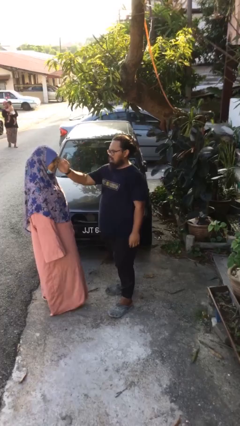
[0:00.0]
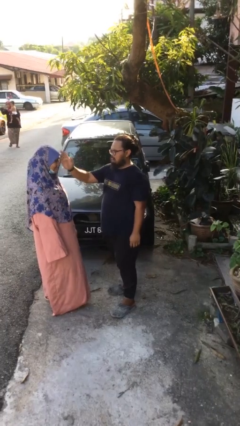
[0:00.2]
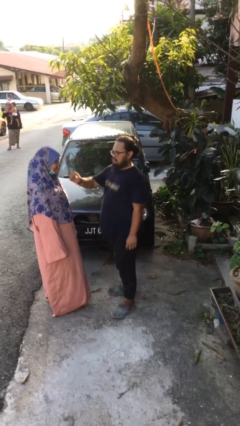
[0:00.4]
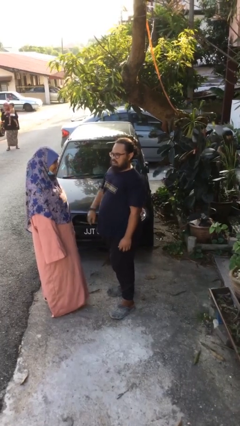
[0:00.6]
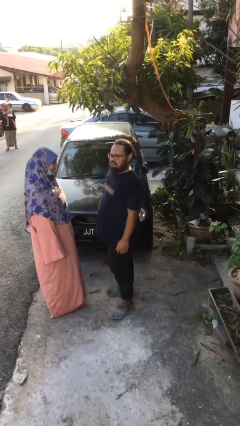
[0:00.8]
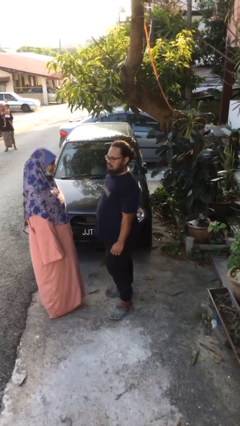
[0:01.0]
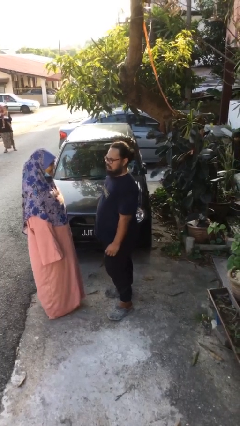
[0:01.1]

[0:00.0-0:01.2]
person touches face of person

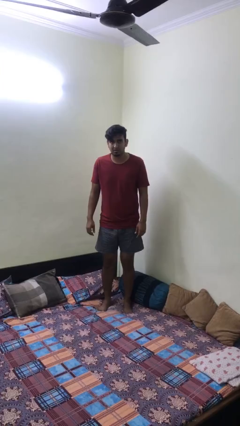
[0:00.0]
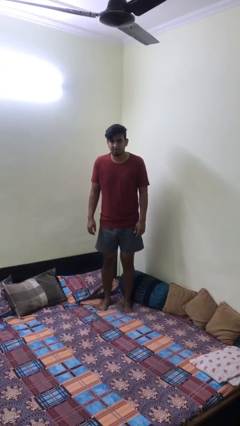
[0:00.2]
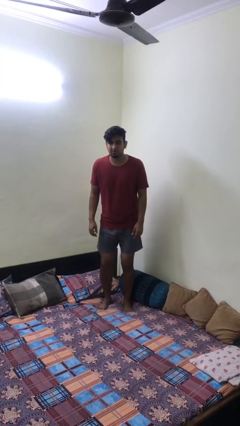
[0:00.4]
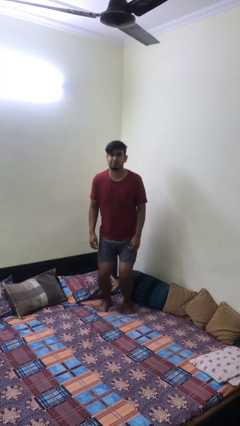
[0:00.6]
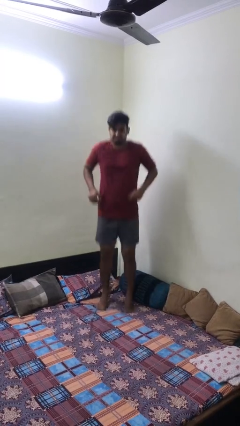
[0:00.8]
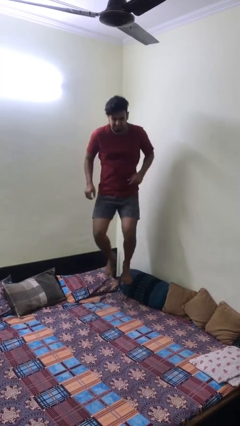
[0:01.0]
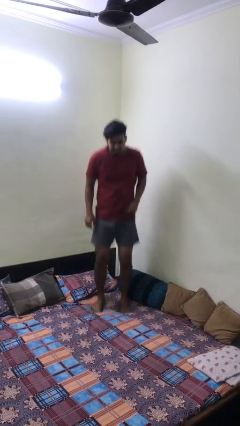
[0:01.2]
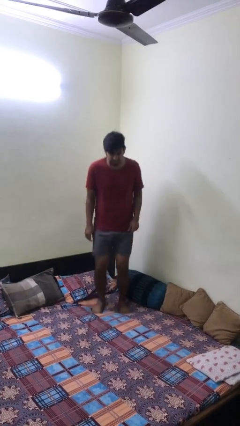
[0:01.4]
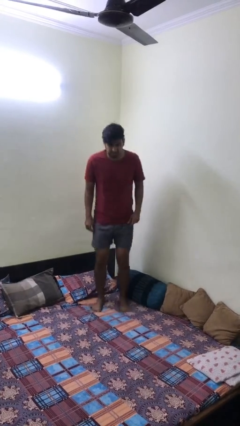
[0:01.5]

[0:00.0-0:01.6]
person jumps on bed

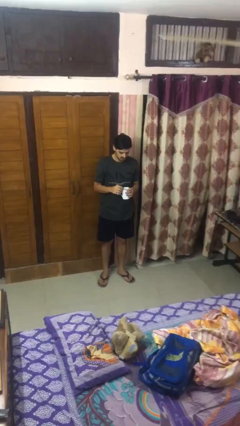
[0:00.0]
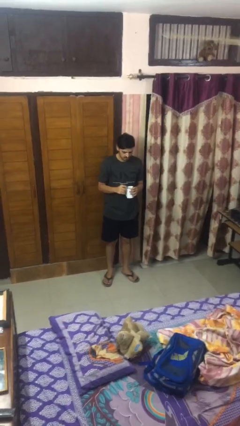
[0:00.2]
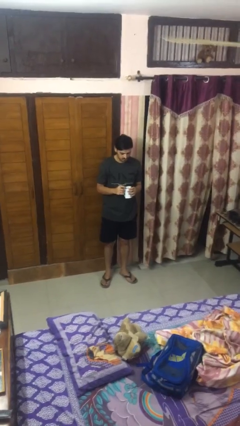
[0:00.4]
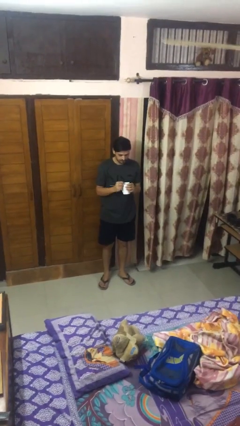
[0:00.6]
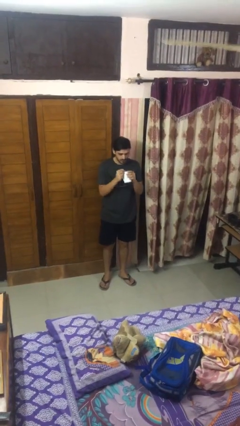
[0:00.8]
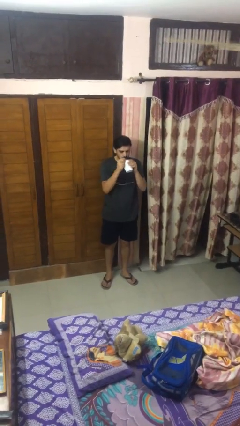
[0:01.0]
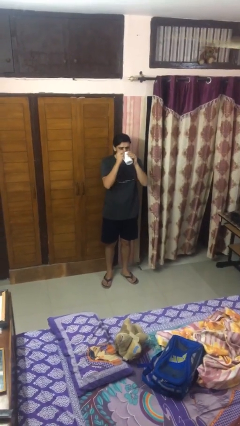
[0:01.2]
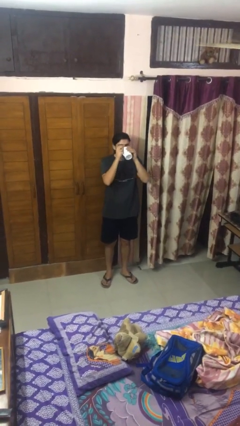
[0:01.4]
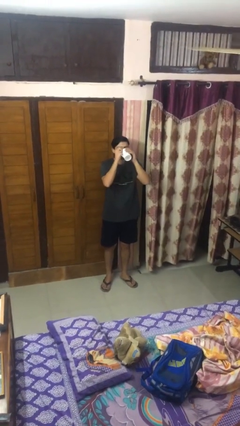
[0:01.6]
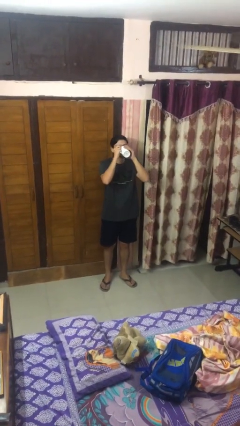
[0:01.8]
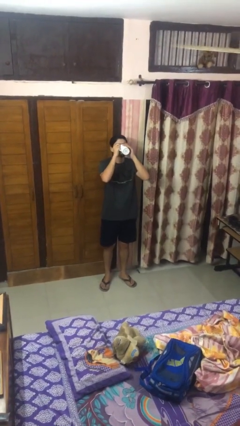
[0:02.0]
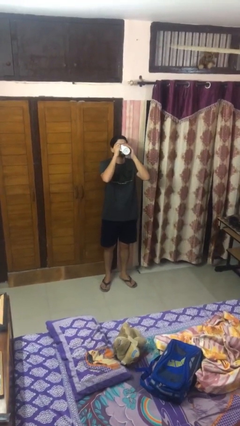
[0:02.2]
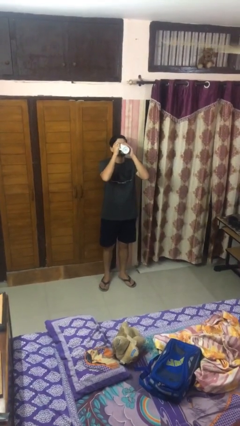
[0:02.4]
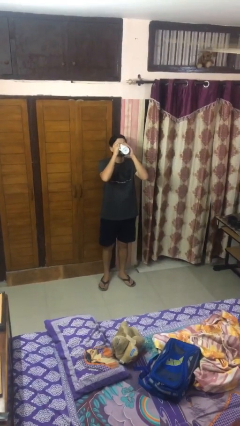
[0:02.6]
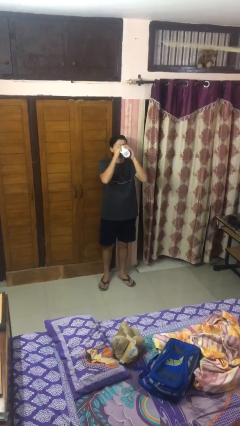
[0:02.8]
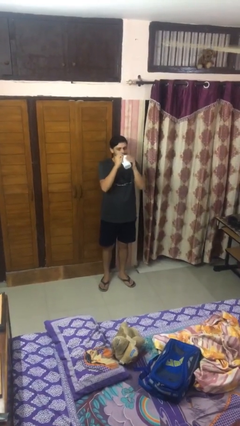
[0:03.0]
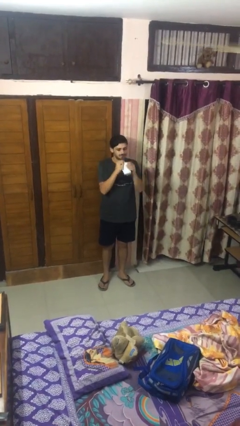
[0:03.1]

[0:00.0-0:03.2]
person drinks from mug

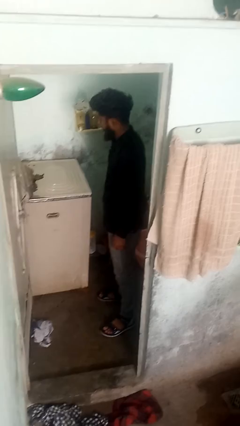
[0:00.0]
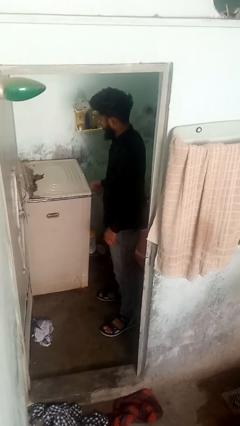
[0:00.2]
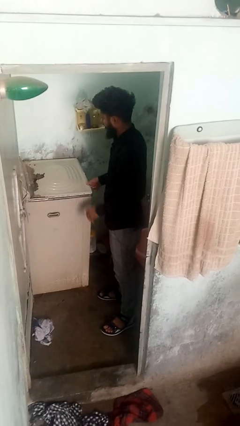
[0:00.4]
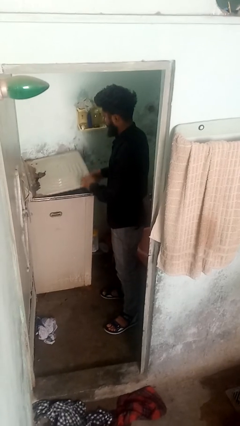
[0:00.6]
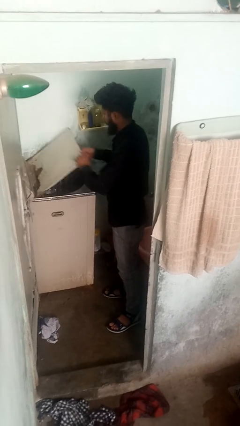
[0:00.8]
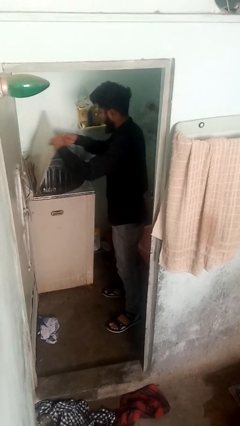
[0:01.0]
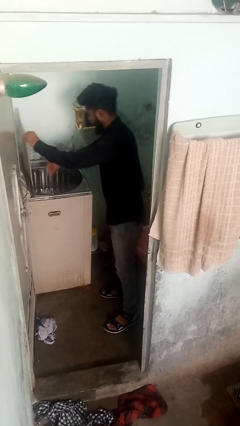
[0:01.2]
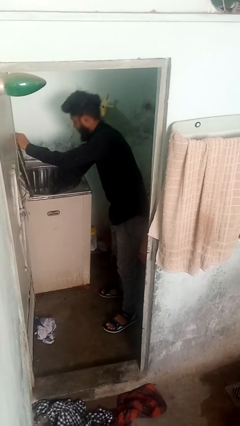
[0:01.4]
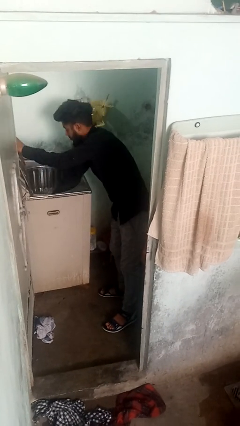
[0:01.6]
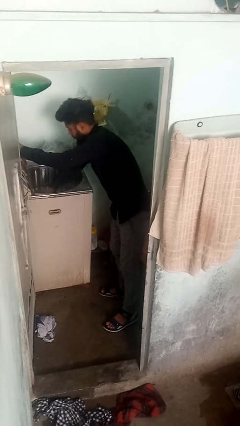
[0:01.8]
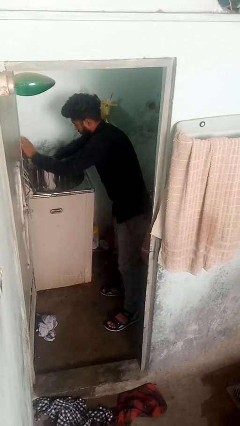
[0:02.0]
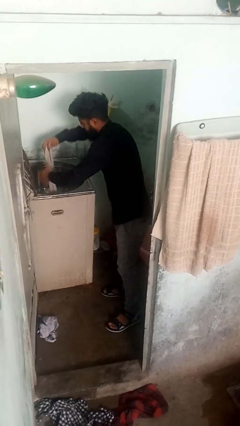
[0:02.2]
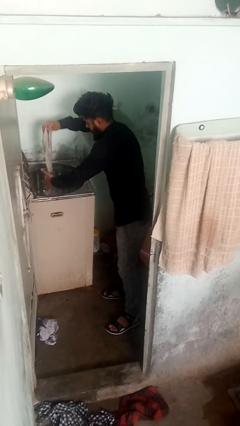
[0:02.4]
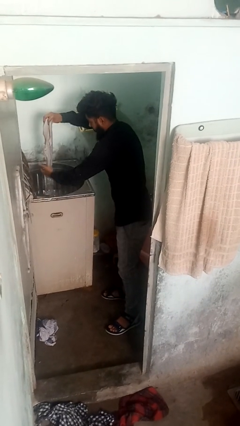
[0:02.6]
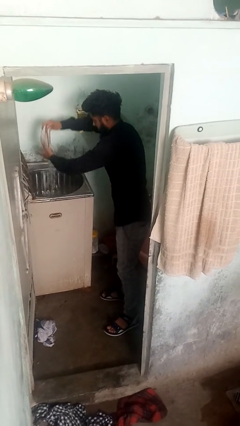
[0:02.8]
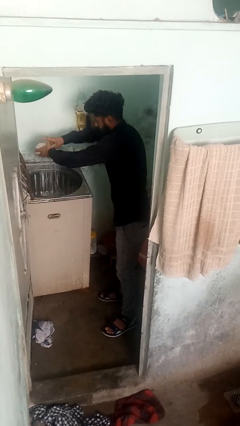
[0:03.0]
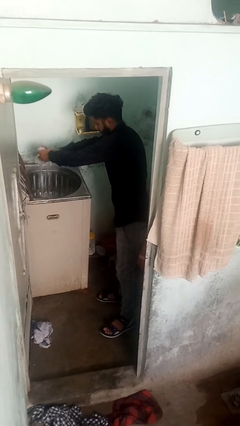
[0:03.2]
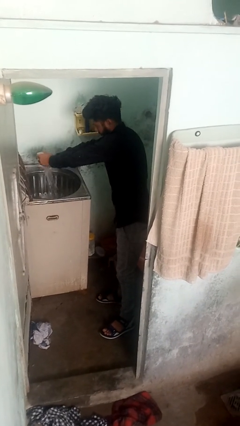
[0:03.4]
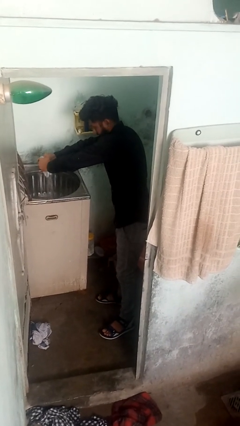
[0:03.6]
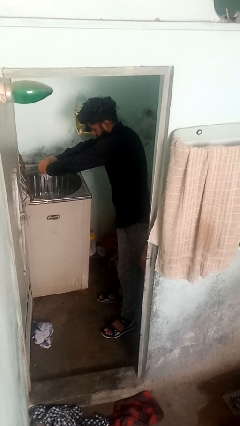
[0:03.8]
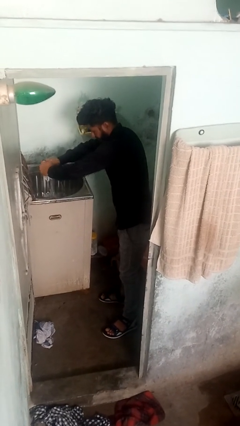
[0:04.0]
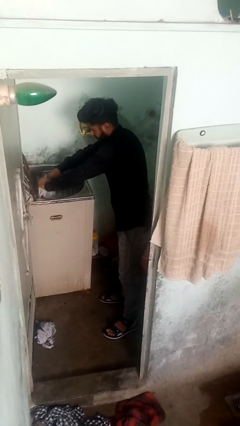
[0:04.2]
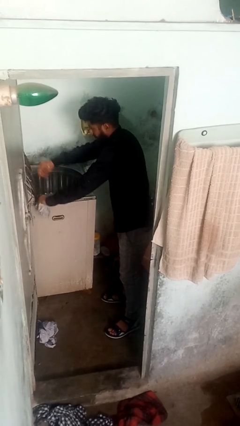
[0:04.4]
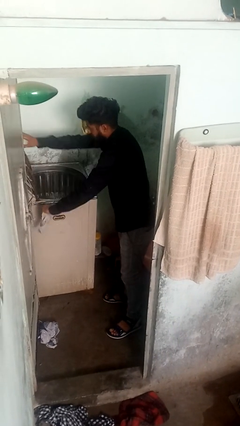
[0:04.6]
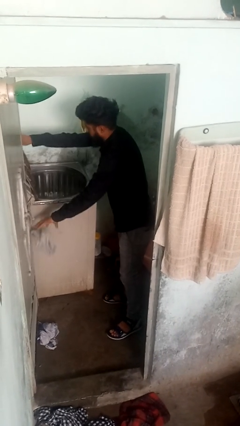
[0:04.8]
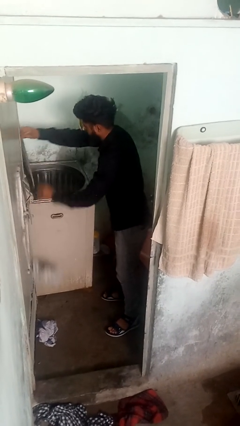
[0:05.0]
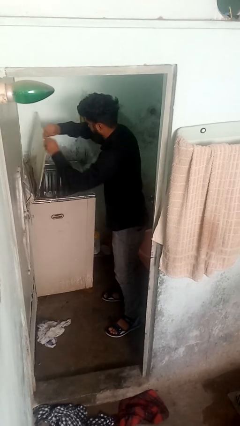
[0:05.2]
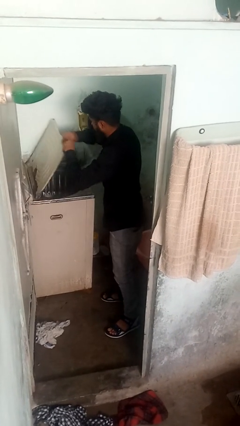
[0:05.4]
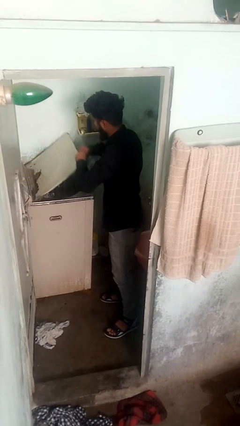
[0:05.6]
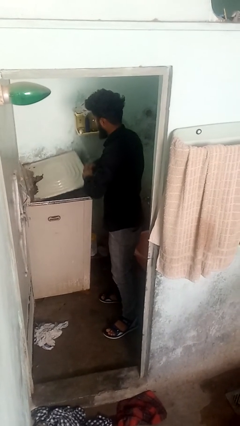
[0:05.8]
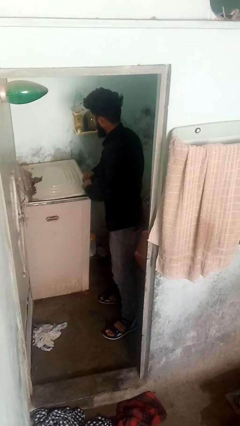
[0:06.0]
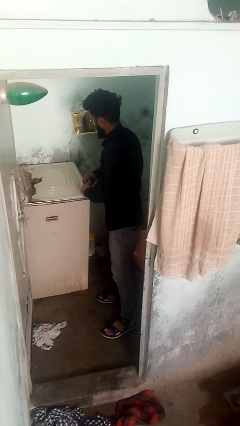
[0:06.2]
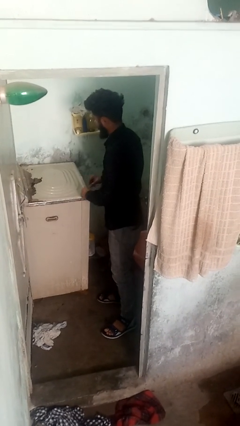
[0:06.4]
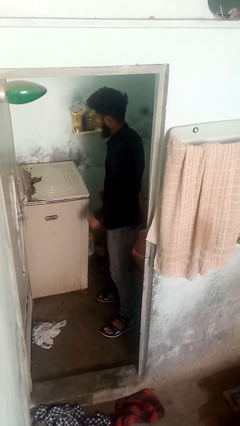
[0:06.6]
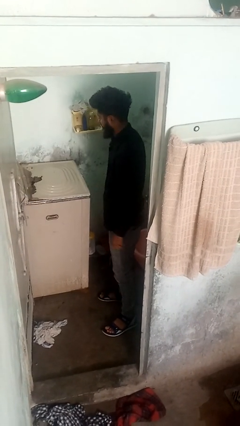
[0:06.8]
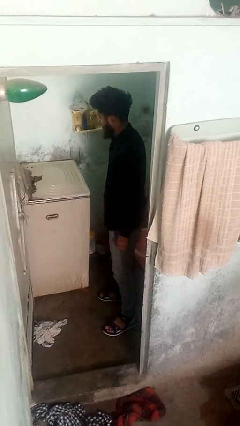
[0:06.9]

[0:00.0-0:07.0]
person unloads clotheswasher

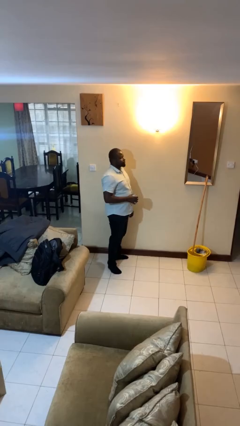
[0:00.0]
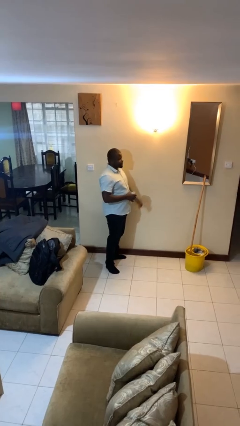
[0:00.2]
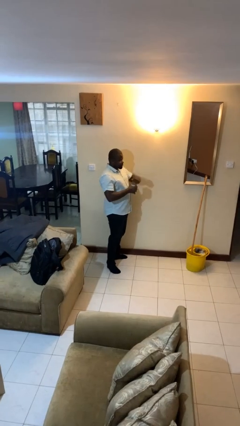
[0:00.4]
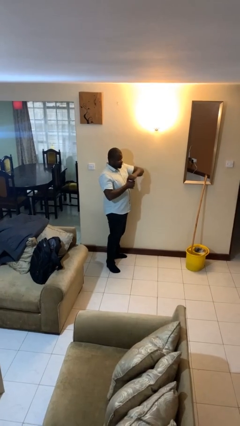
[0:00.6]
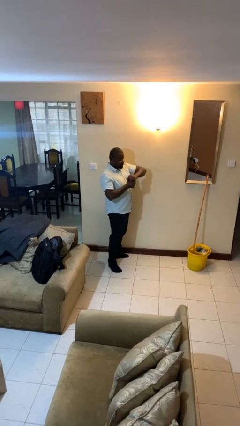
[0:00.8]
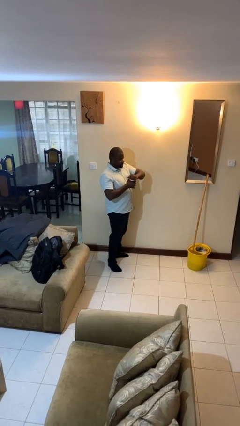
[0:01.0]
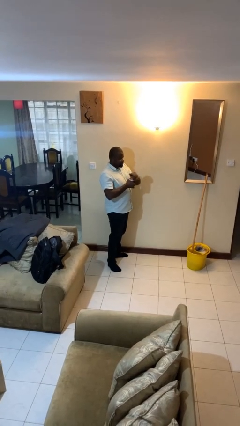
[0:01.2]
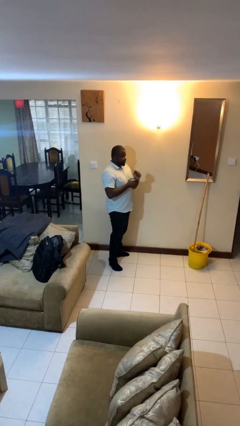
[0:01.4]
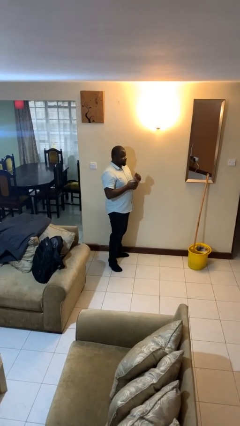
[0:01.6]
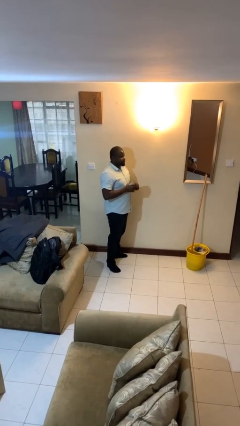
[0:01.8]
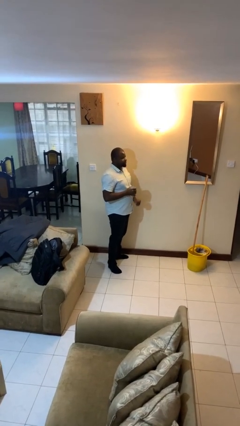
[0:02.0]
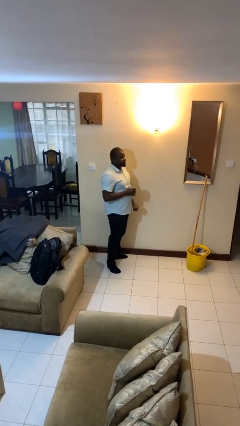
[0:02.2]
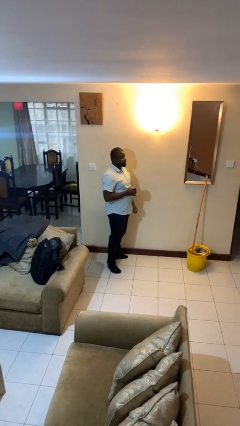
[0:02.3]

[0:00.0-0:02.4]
person opens beverage can

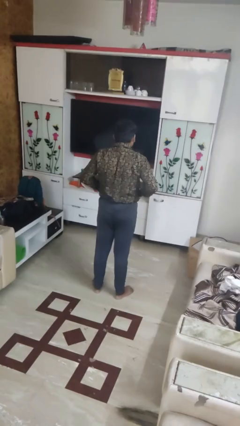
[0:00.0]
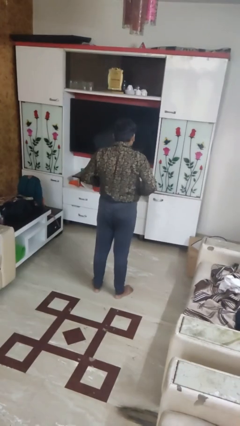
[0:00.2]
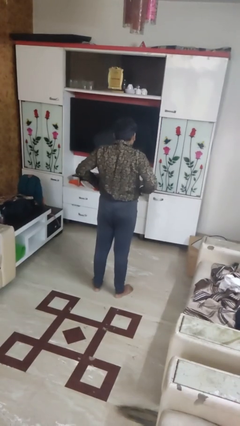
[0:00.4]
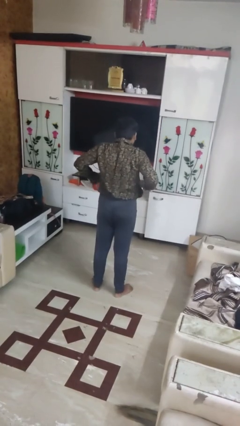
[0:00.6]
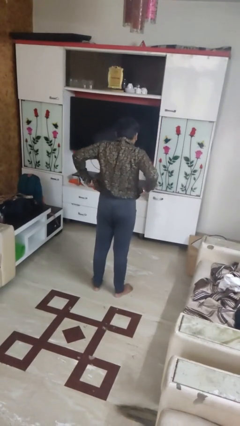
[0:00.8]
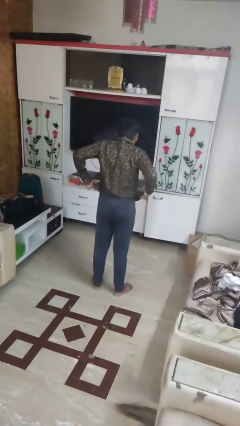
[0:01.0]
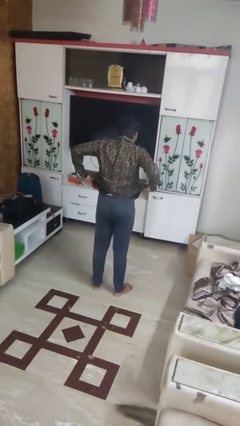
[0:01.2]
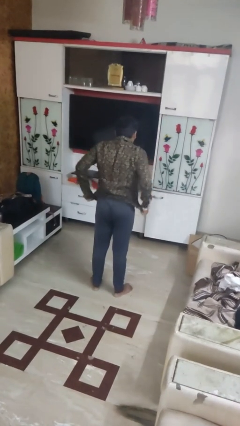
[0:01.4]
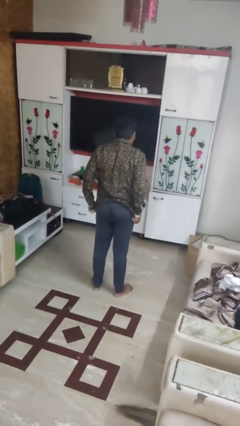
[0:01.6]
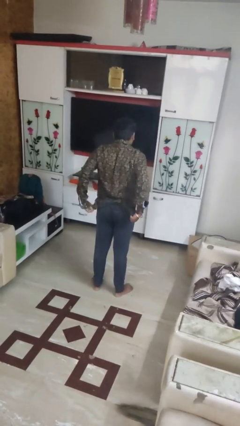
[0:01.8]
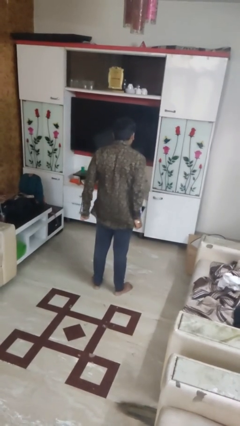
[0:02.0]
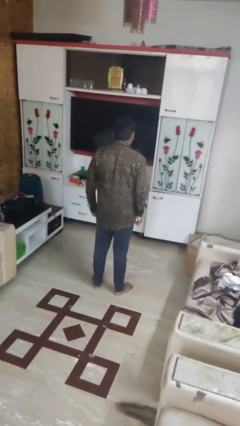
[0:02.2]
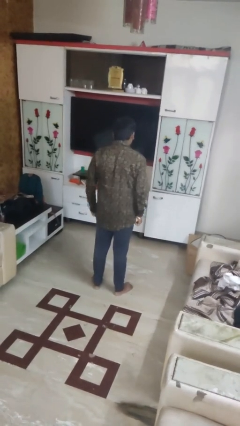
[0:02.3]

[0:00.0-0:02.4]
person untucks shirt
